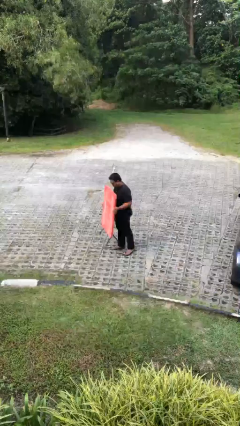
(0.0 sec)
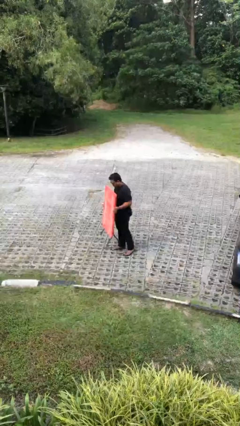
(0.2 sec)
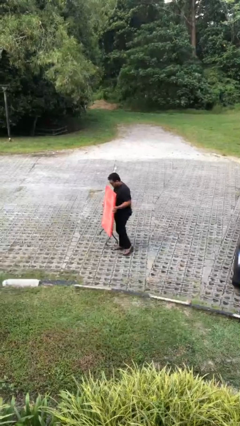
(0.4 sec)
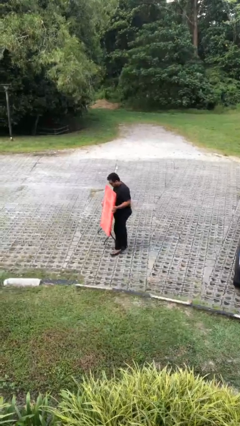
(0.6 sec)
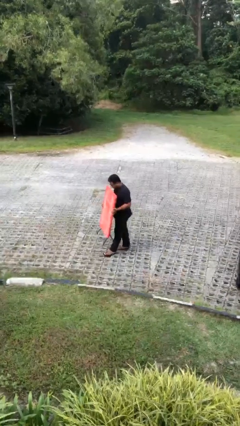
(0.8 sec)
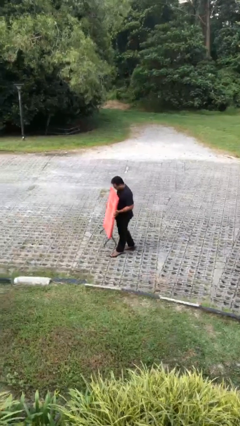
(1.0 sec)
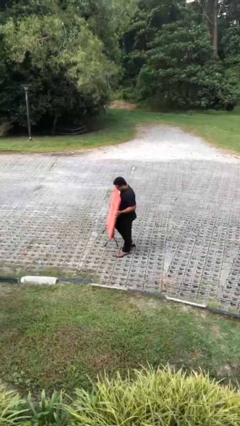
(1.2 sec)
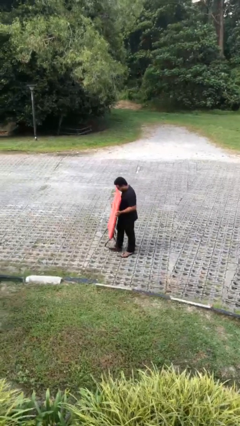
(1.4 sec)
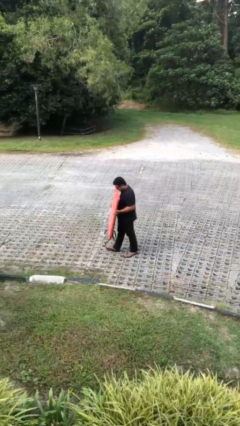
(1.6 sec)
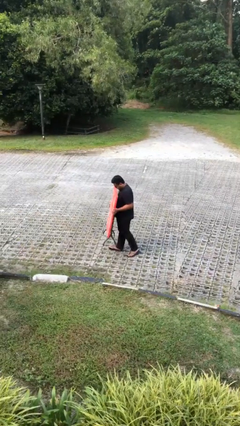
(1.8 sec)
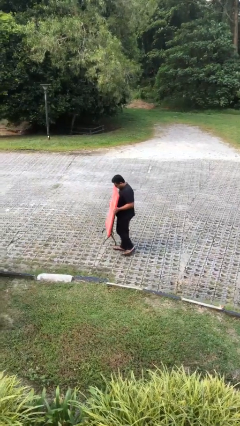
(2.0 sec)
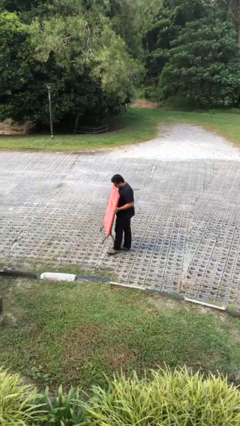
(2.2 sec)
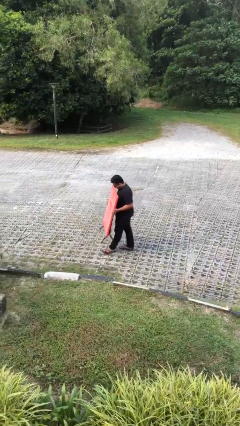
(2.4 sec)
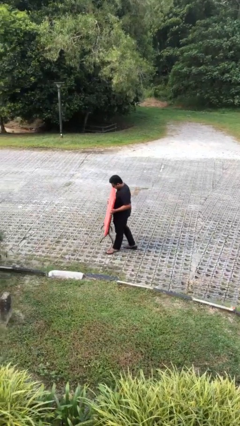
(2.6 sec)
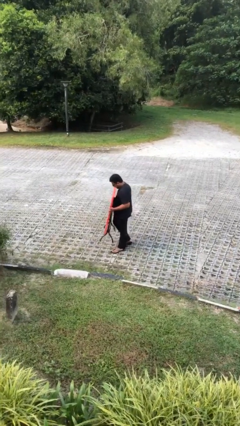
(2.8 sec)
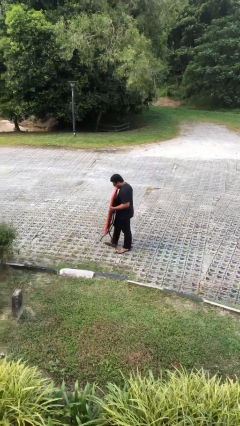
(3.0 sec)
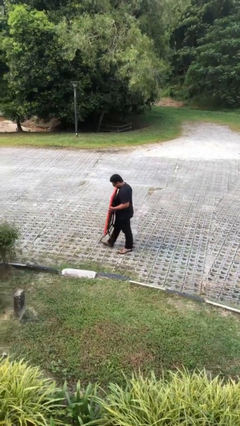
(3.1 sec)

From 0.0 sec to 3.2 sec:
person carries heavy object

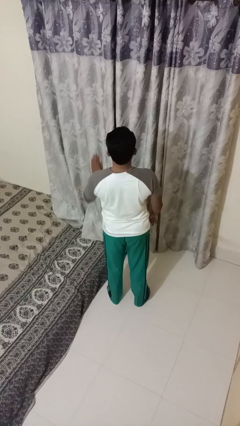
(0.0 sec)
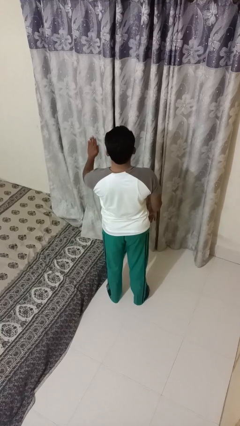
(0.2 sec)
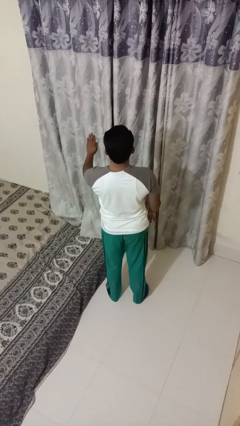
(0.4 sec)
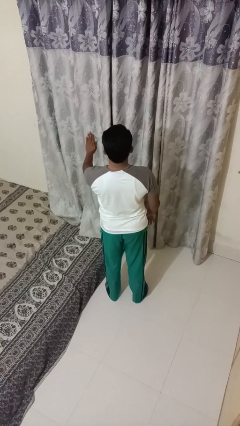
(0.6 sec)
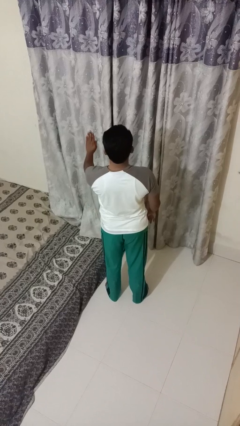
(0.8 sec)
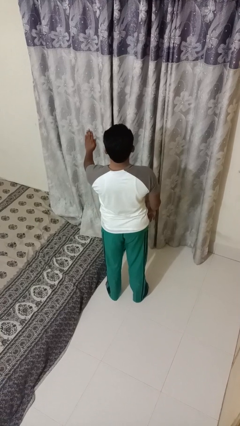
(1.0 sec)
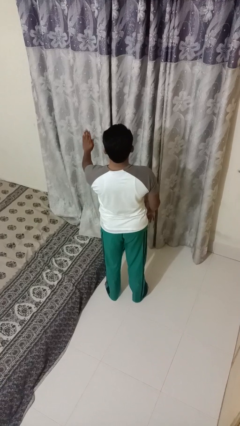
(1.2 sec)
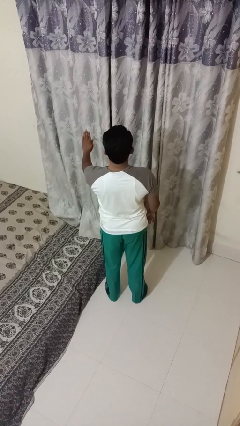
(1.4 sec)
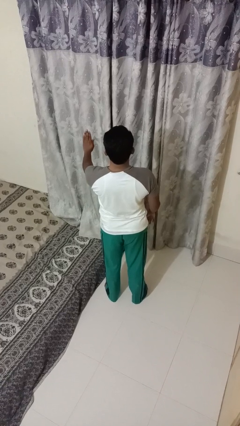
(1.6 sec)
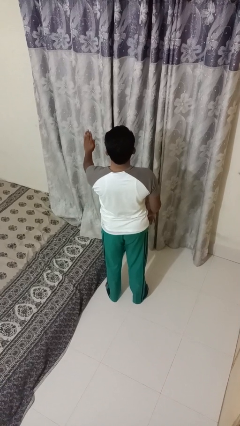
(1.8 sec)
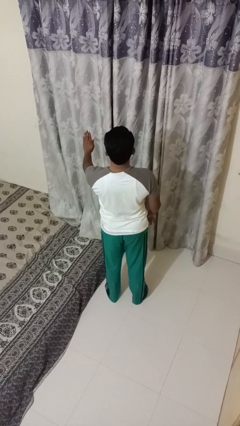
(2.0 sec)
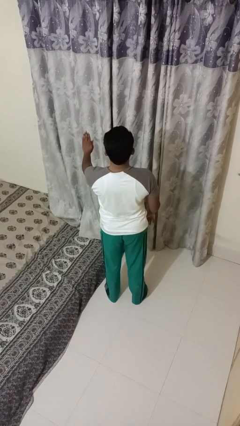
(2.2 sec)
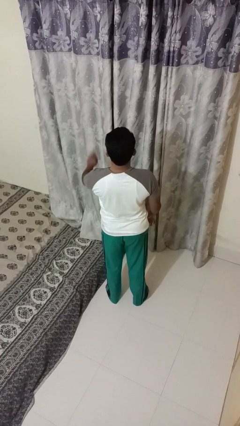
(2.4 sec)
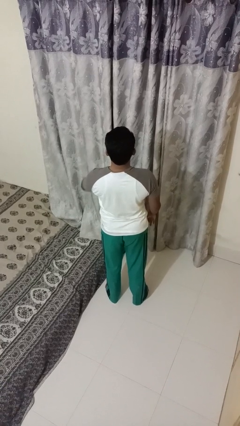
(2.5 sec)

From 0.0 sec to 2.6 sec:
person gestures stop

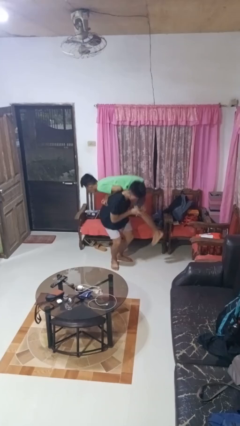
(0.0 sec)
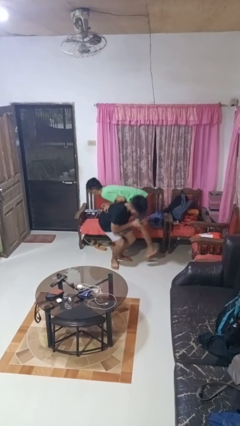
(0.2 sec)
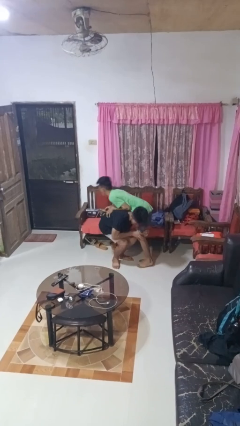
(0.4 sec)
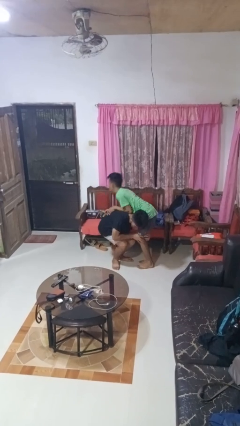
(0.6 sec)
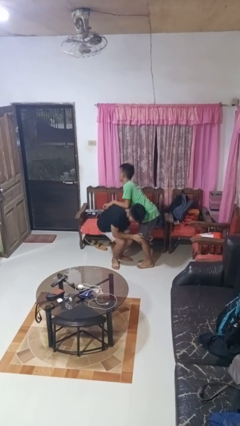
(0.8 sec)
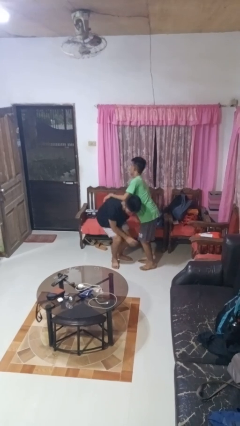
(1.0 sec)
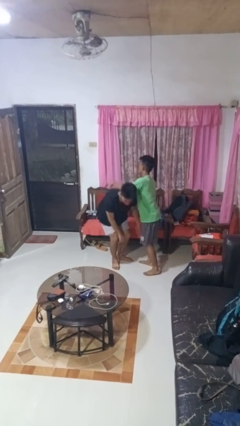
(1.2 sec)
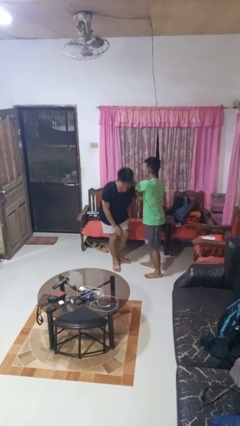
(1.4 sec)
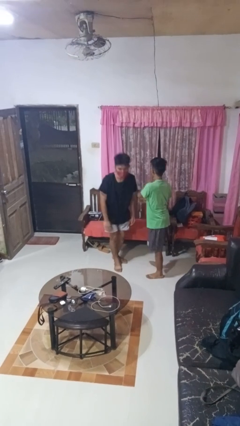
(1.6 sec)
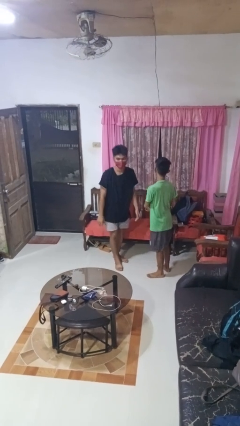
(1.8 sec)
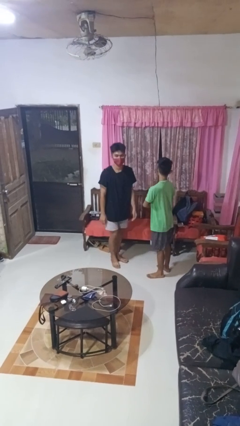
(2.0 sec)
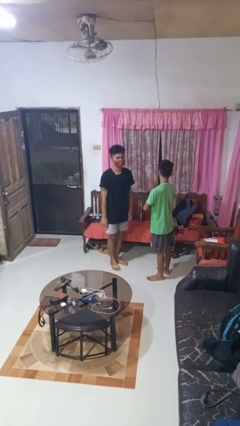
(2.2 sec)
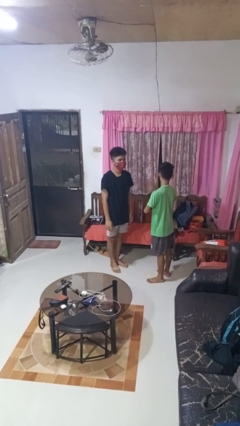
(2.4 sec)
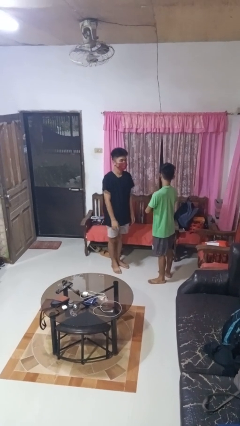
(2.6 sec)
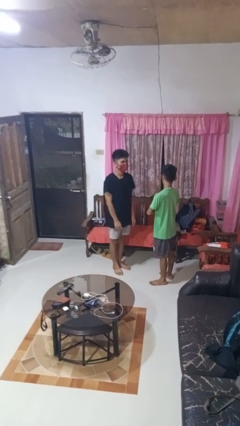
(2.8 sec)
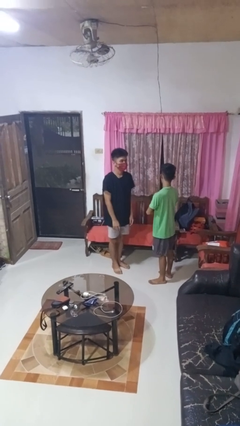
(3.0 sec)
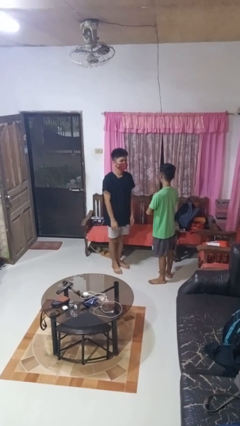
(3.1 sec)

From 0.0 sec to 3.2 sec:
person puts down person

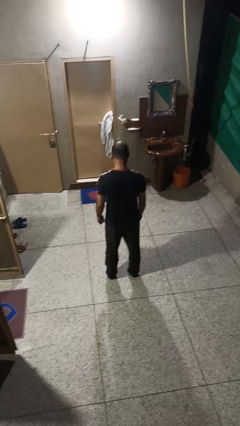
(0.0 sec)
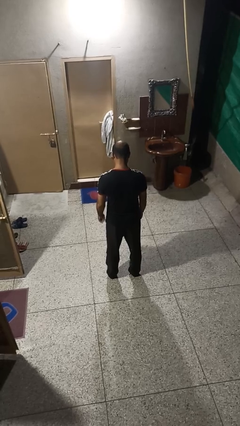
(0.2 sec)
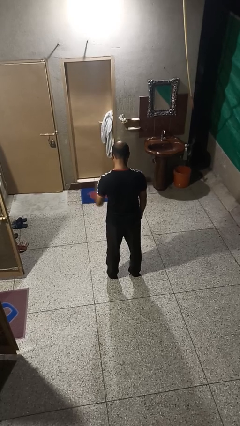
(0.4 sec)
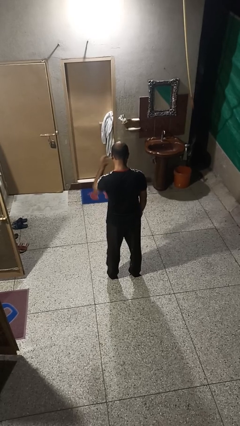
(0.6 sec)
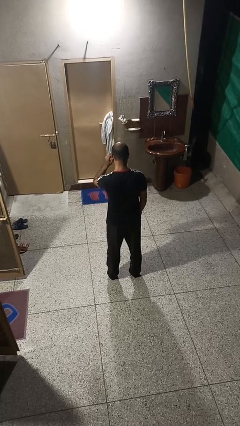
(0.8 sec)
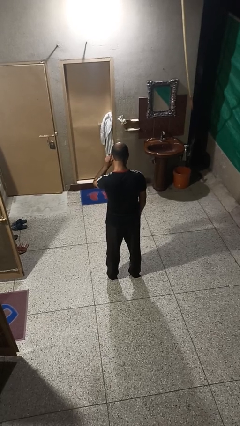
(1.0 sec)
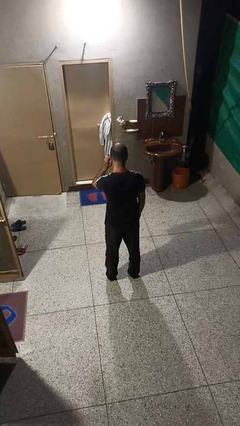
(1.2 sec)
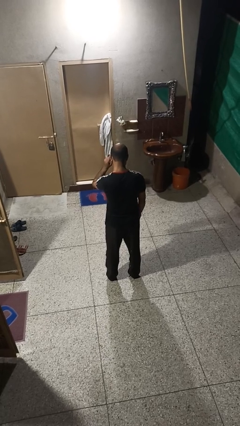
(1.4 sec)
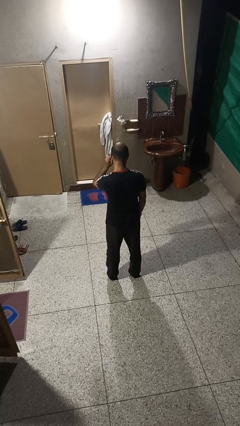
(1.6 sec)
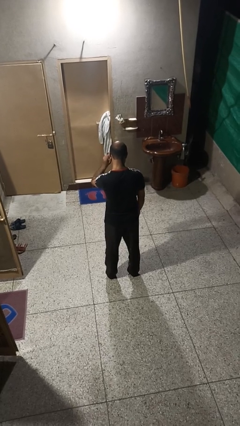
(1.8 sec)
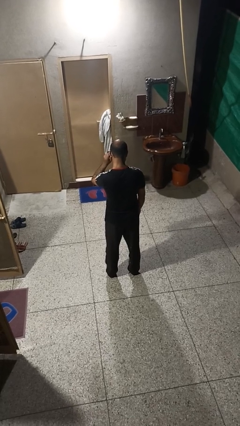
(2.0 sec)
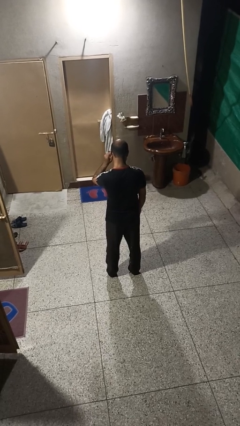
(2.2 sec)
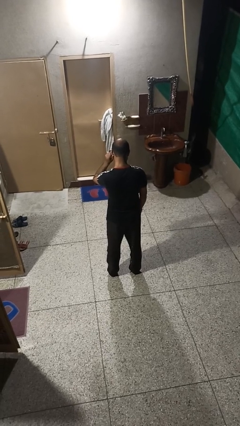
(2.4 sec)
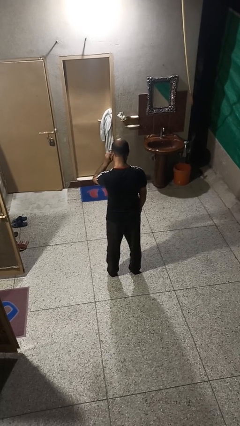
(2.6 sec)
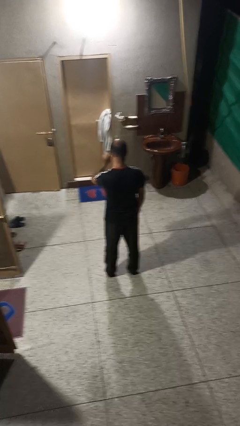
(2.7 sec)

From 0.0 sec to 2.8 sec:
person touches earlobe

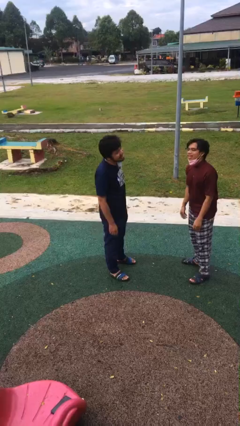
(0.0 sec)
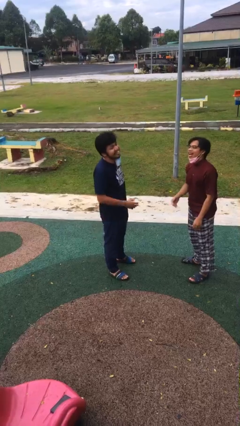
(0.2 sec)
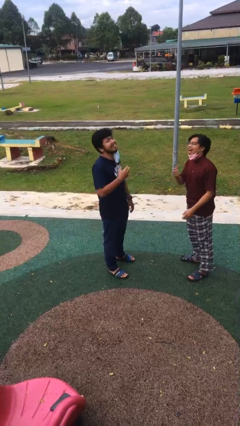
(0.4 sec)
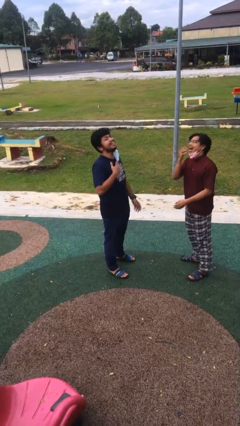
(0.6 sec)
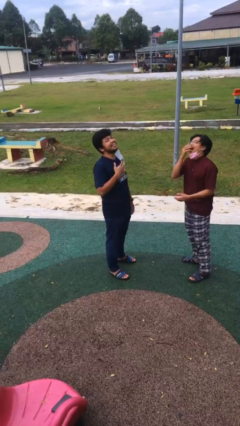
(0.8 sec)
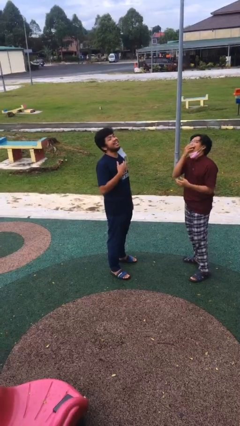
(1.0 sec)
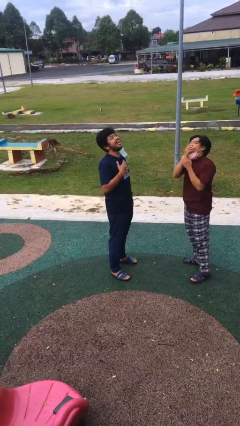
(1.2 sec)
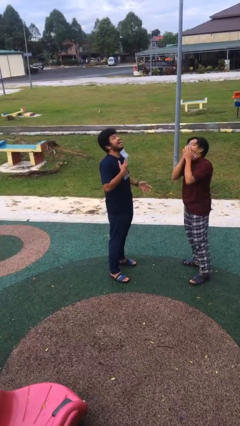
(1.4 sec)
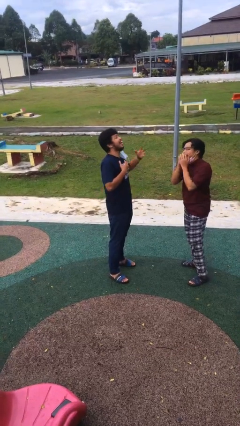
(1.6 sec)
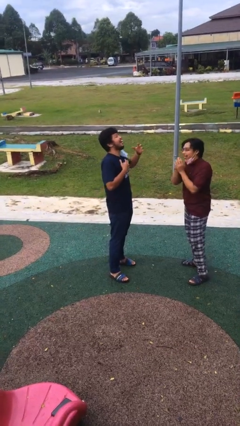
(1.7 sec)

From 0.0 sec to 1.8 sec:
person laughs with person

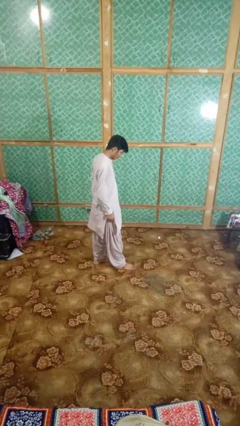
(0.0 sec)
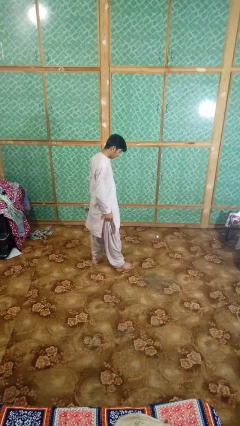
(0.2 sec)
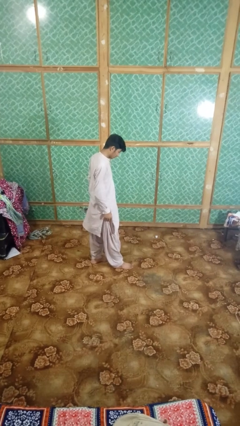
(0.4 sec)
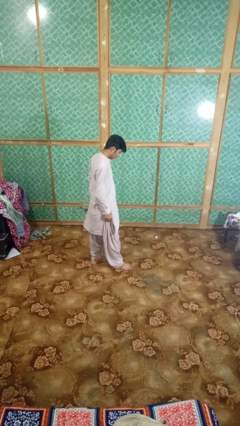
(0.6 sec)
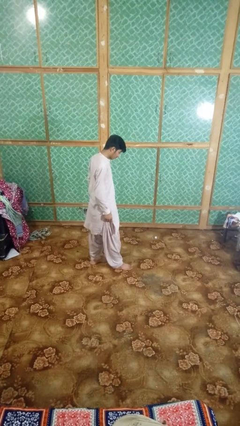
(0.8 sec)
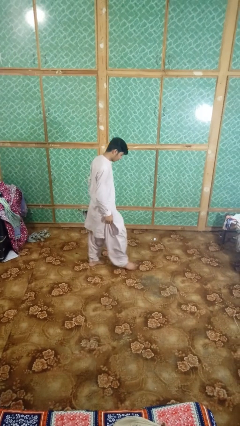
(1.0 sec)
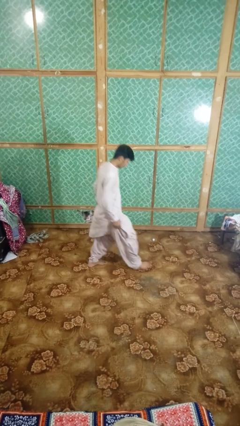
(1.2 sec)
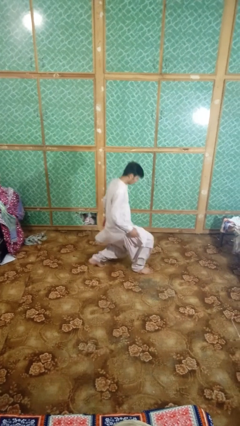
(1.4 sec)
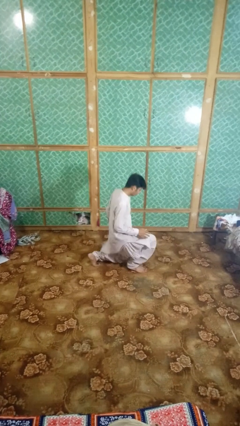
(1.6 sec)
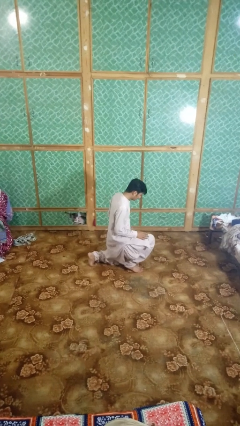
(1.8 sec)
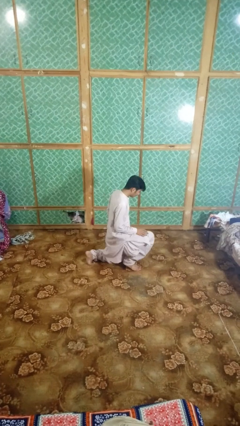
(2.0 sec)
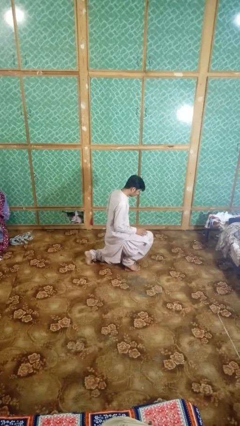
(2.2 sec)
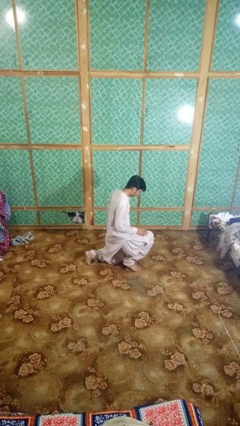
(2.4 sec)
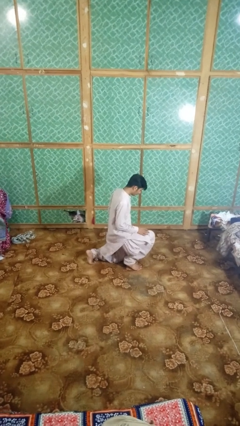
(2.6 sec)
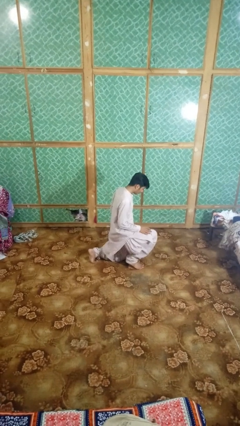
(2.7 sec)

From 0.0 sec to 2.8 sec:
person exercises with lunges

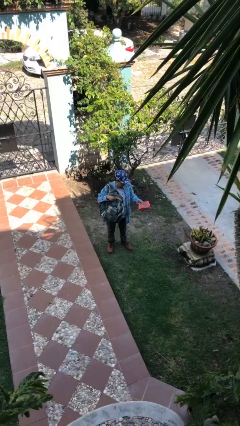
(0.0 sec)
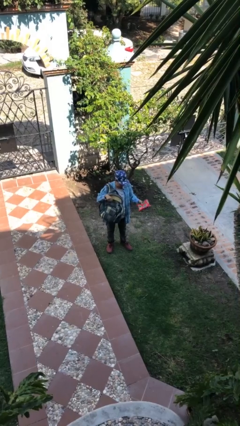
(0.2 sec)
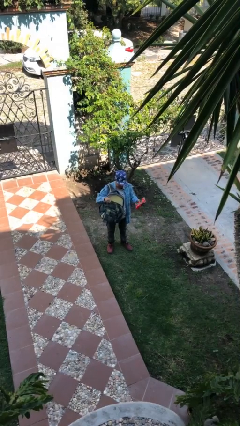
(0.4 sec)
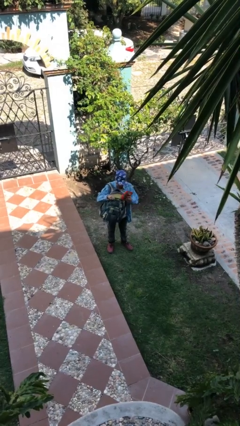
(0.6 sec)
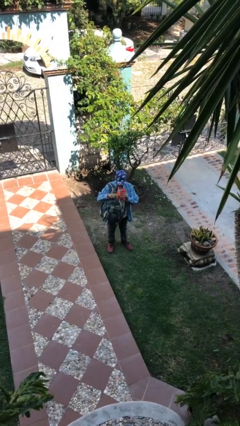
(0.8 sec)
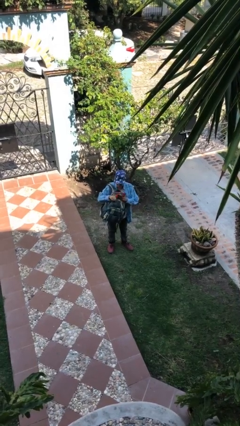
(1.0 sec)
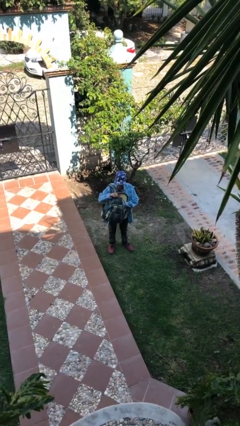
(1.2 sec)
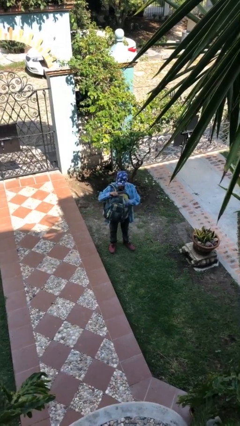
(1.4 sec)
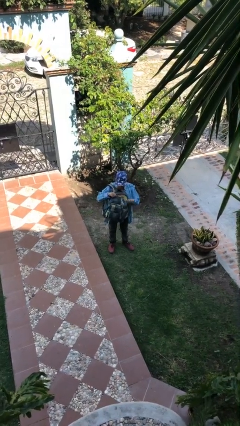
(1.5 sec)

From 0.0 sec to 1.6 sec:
person puts object into backpack
